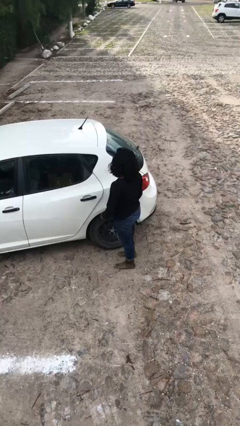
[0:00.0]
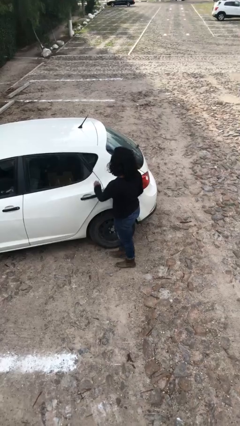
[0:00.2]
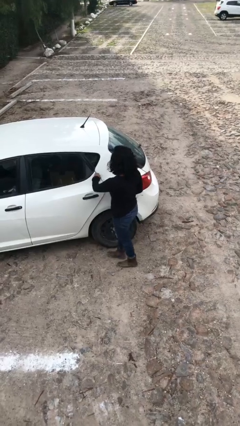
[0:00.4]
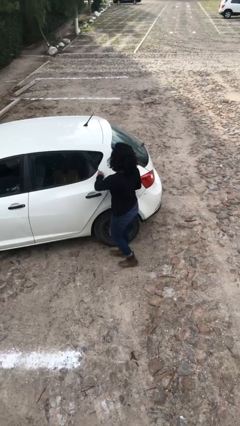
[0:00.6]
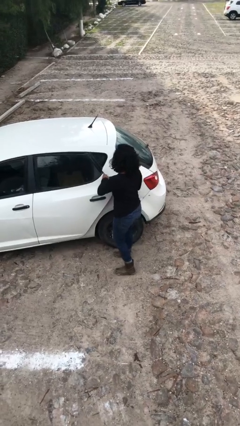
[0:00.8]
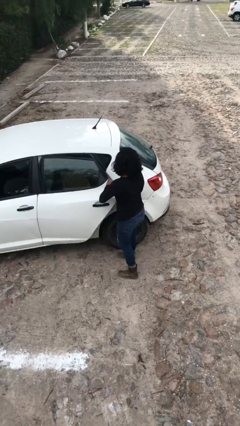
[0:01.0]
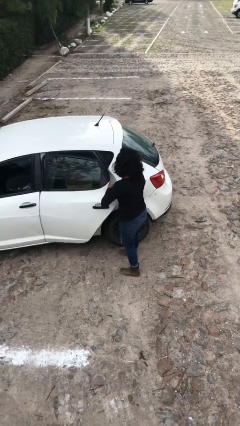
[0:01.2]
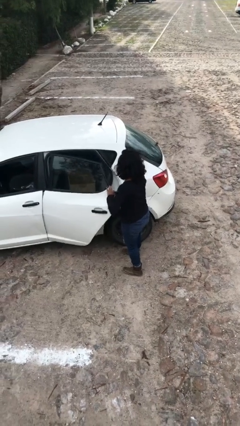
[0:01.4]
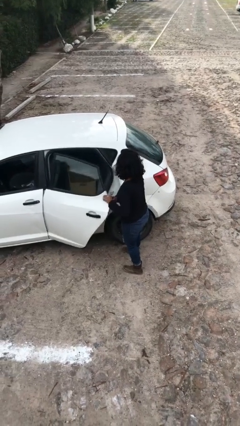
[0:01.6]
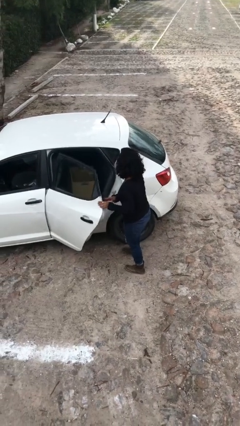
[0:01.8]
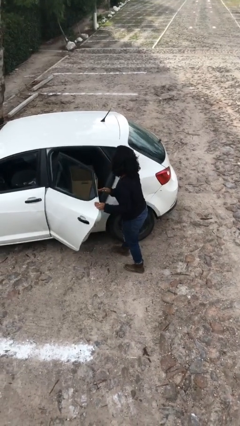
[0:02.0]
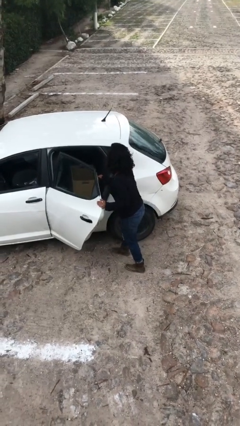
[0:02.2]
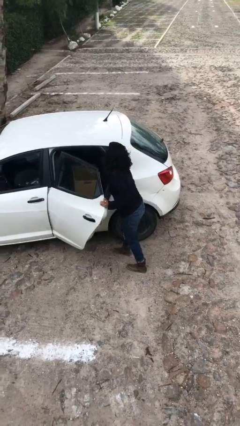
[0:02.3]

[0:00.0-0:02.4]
person opens car door

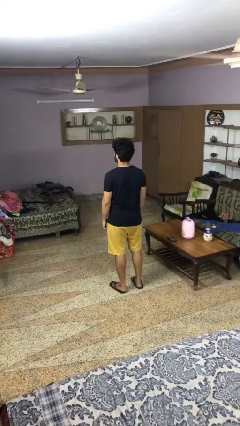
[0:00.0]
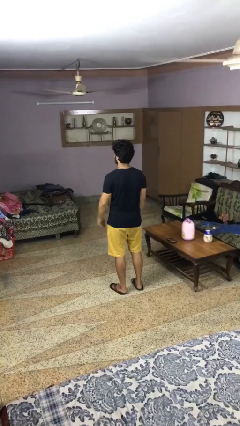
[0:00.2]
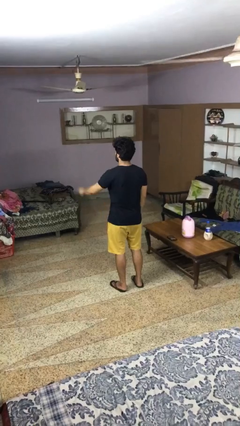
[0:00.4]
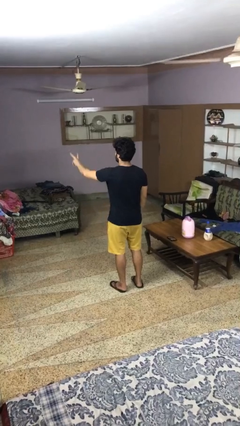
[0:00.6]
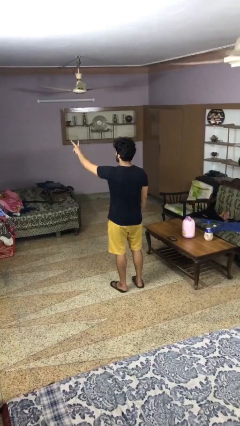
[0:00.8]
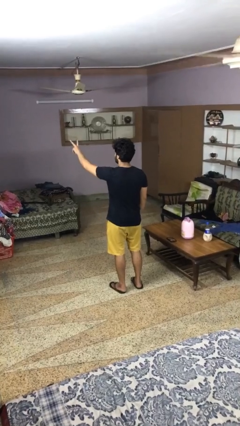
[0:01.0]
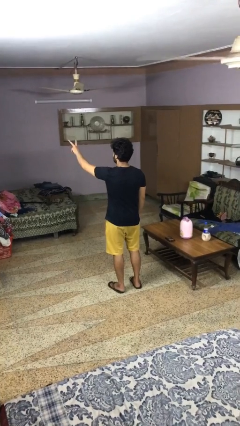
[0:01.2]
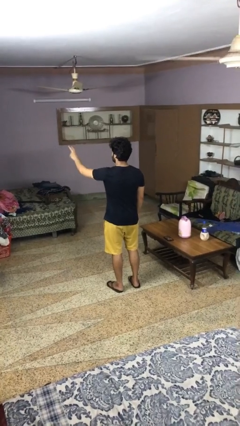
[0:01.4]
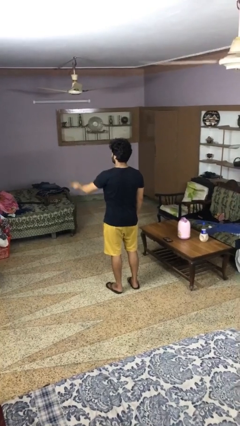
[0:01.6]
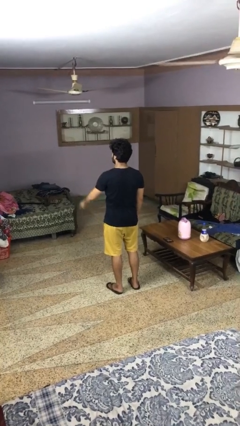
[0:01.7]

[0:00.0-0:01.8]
person gestures peace

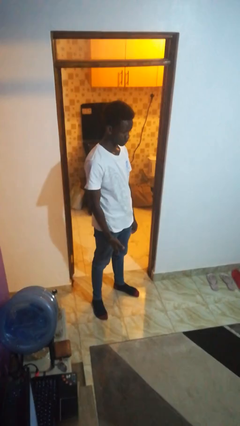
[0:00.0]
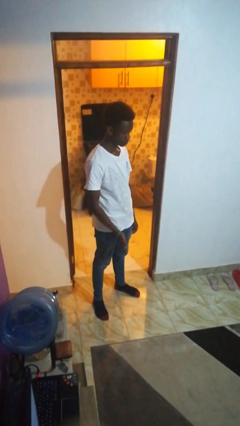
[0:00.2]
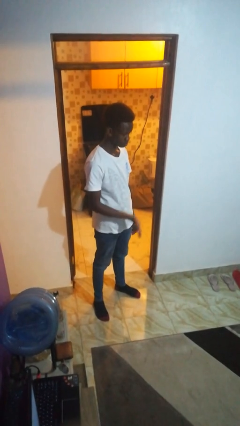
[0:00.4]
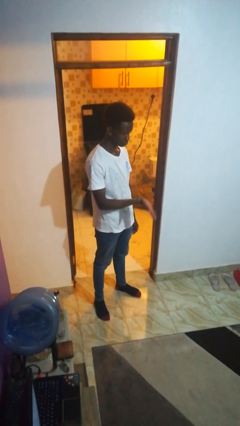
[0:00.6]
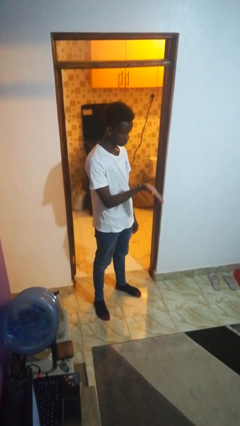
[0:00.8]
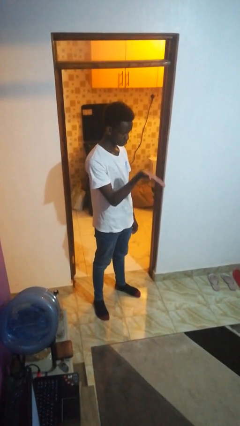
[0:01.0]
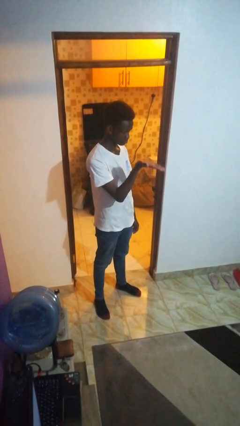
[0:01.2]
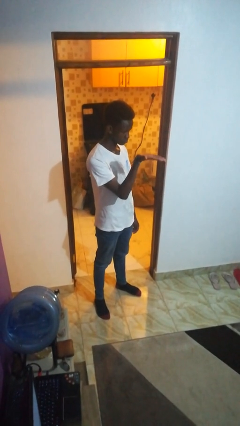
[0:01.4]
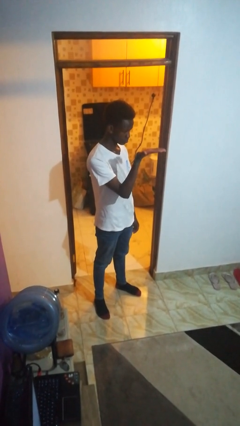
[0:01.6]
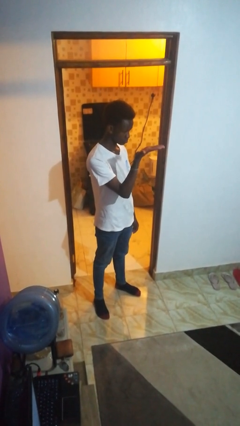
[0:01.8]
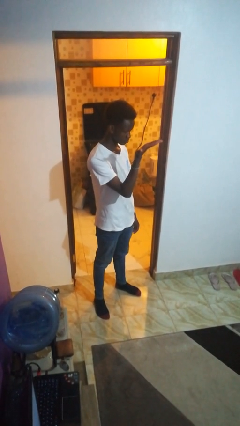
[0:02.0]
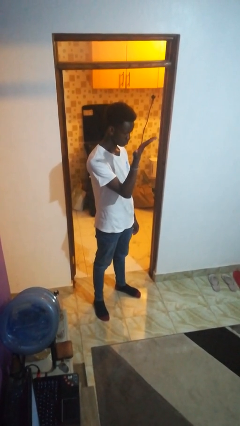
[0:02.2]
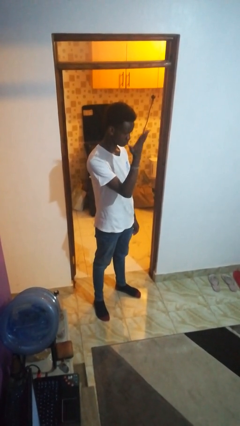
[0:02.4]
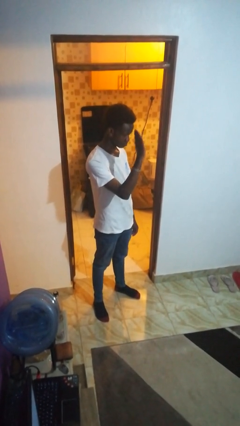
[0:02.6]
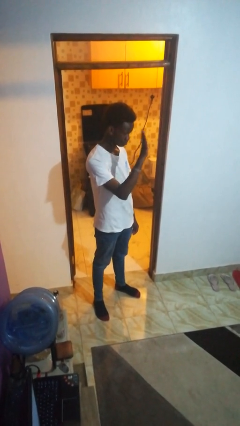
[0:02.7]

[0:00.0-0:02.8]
person gestures swipe up

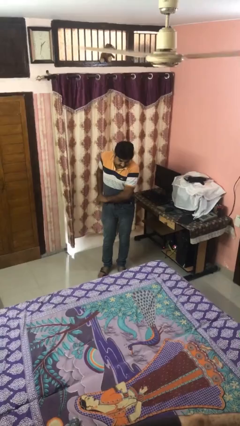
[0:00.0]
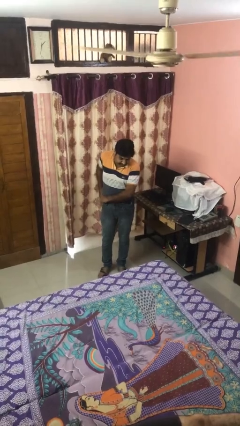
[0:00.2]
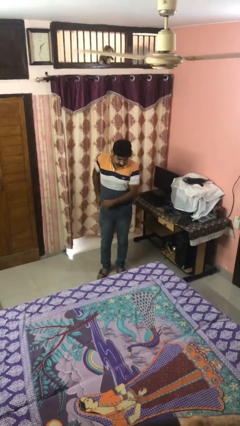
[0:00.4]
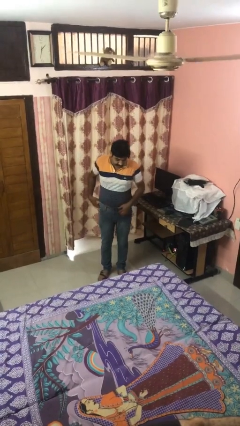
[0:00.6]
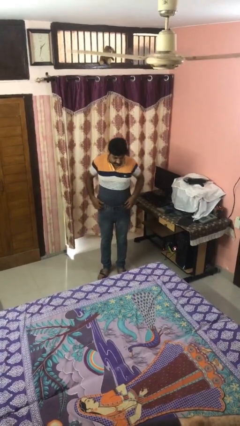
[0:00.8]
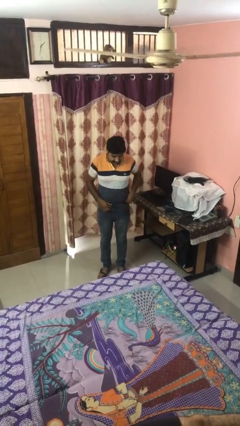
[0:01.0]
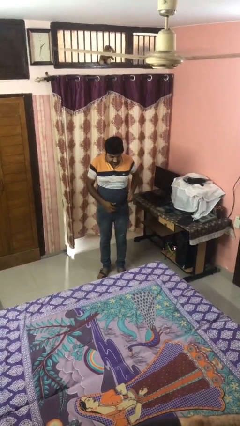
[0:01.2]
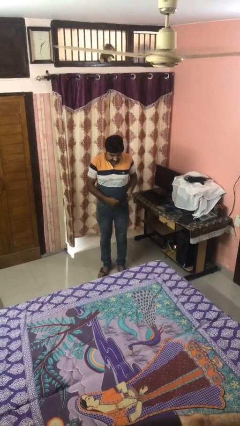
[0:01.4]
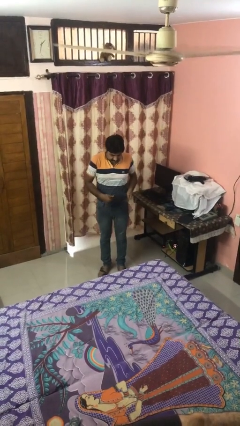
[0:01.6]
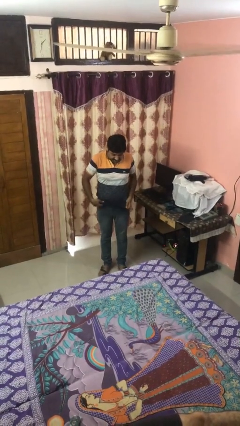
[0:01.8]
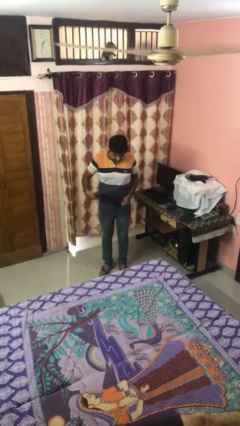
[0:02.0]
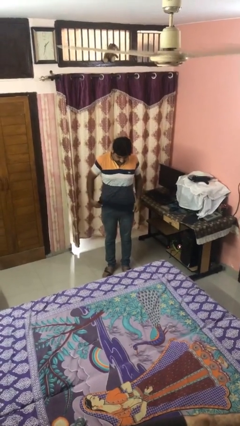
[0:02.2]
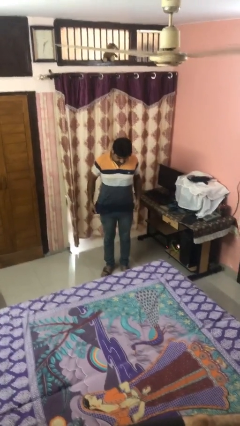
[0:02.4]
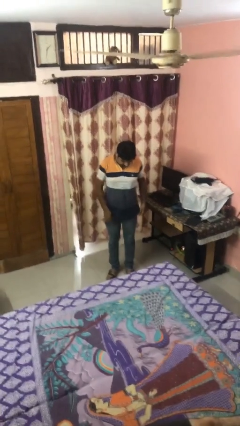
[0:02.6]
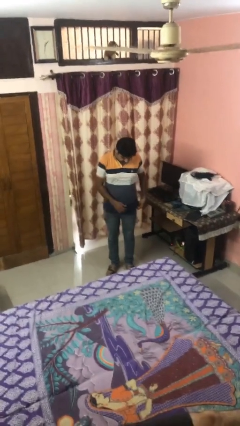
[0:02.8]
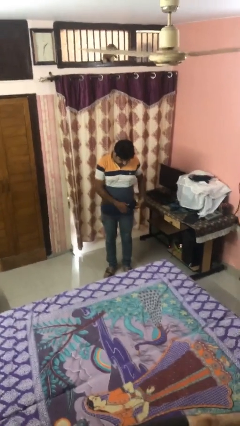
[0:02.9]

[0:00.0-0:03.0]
person untucks shirt

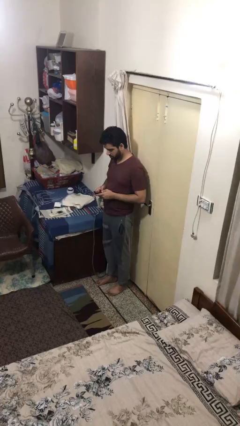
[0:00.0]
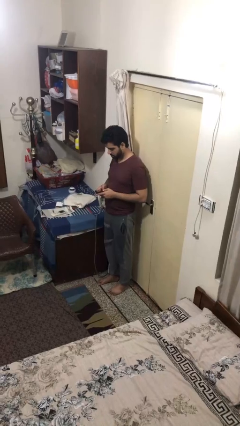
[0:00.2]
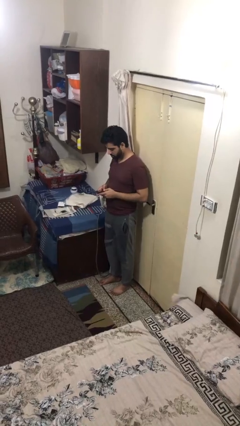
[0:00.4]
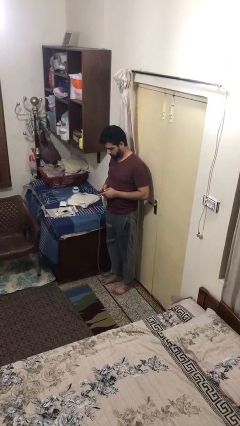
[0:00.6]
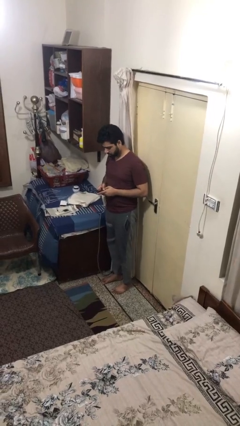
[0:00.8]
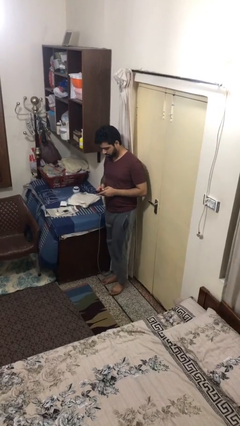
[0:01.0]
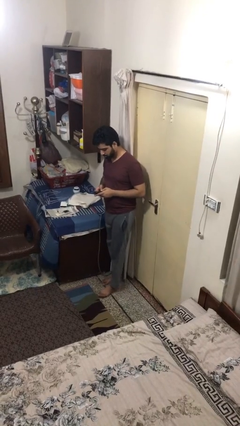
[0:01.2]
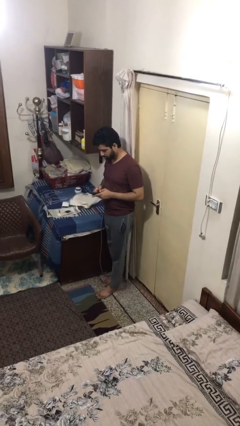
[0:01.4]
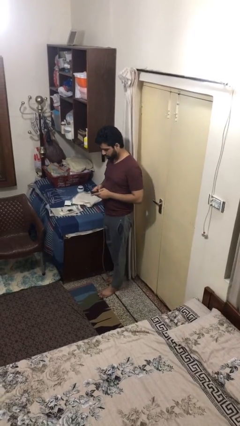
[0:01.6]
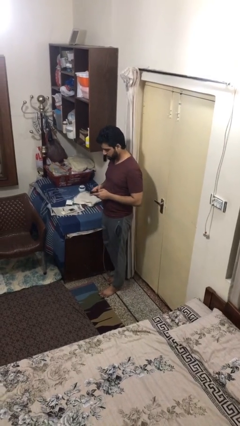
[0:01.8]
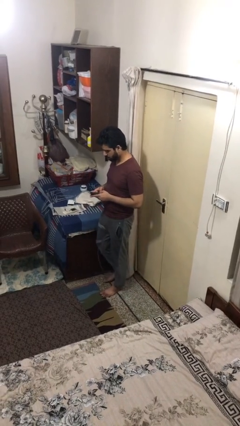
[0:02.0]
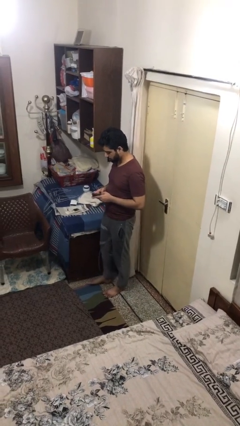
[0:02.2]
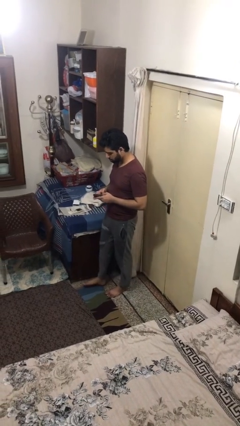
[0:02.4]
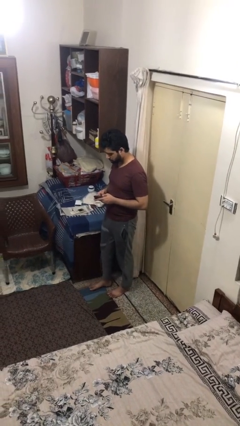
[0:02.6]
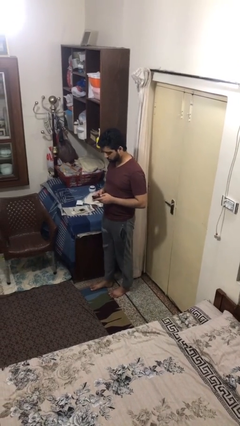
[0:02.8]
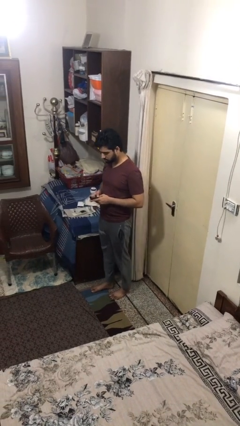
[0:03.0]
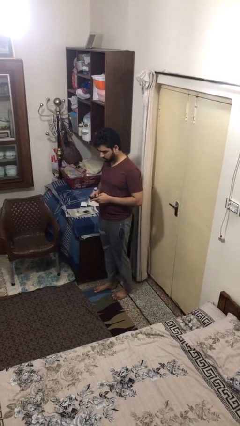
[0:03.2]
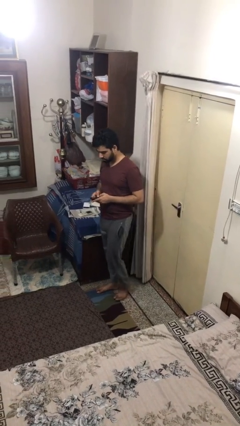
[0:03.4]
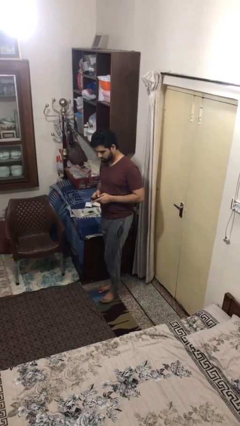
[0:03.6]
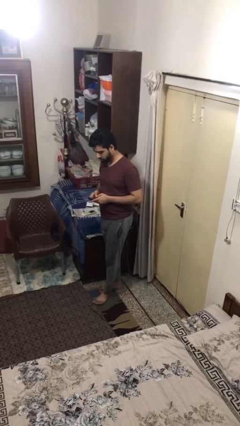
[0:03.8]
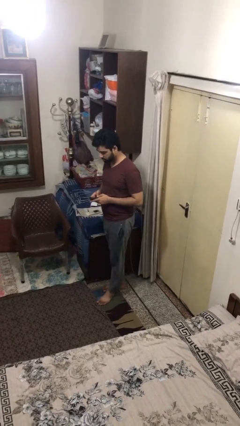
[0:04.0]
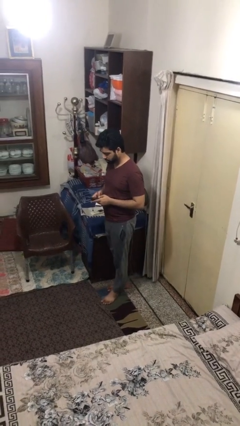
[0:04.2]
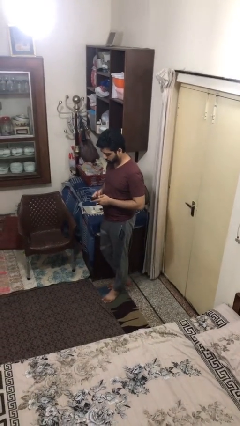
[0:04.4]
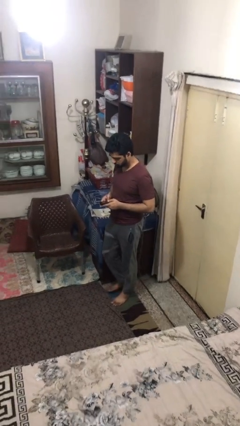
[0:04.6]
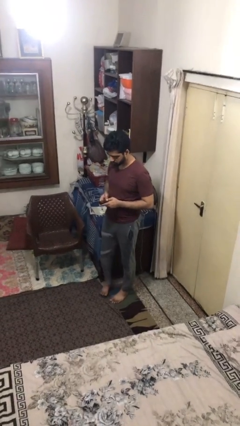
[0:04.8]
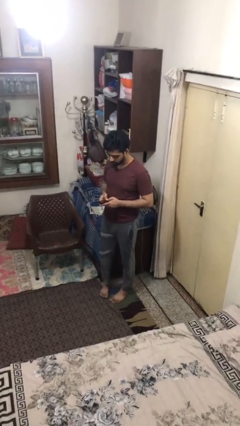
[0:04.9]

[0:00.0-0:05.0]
person texts on phone

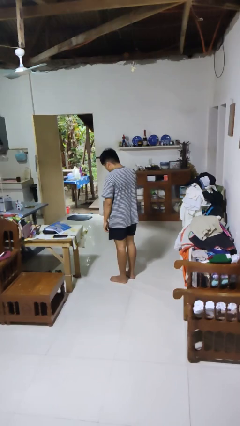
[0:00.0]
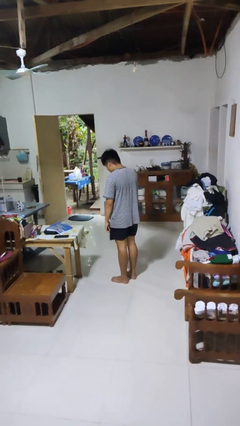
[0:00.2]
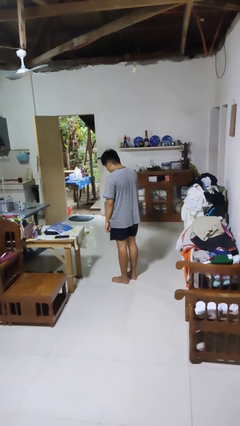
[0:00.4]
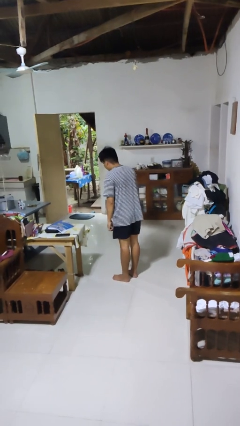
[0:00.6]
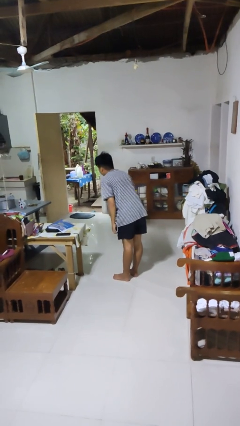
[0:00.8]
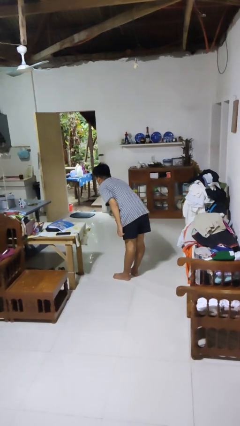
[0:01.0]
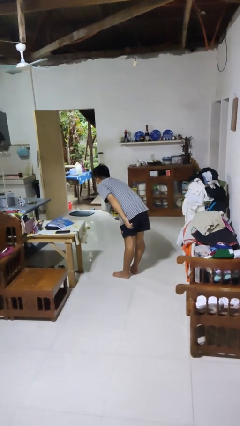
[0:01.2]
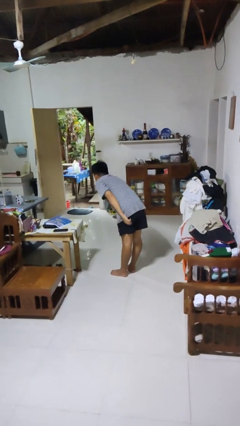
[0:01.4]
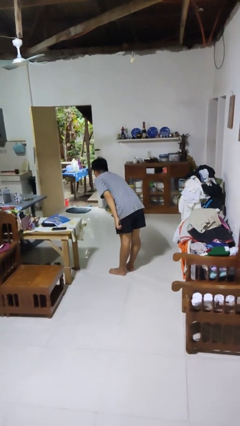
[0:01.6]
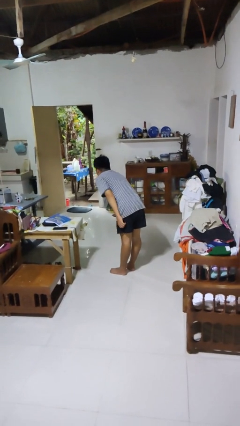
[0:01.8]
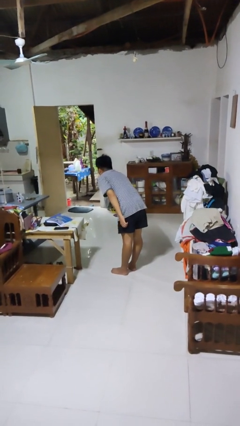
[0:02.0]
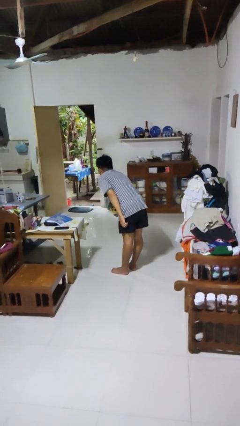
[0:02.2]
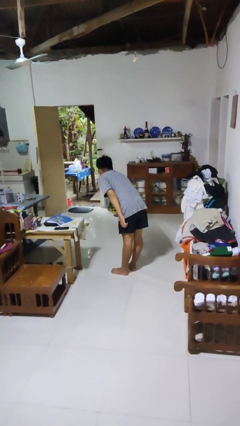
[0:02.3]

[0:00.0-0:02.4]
person bows
